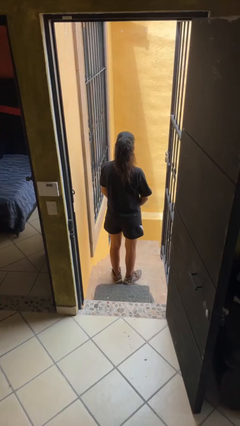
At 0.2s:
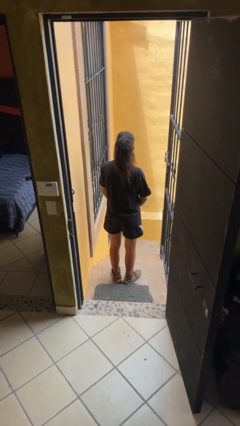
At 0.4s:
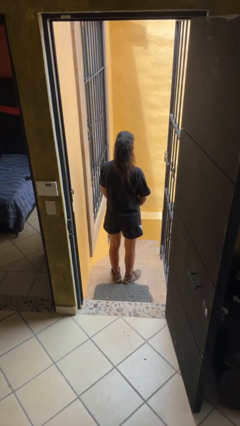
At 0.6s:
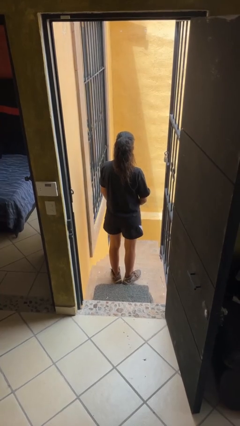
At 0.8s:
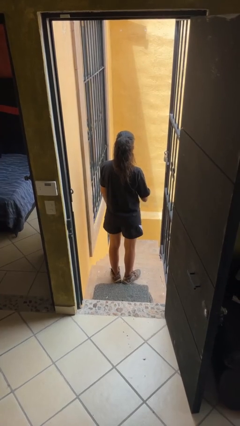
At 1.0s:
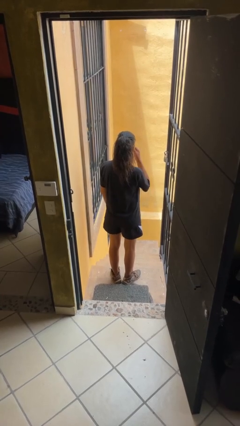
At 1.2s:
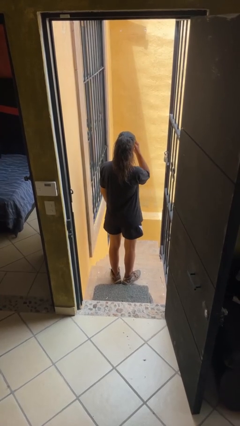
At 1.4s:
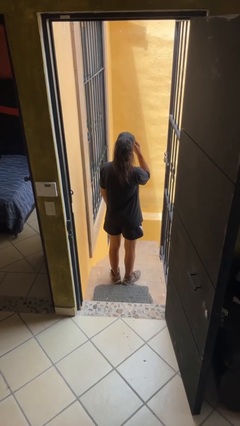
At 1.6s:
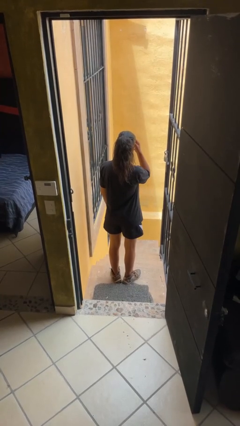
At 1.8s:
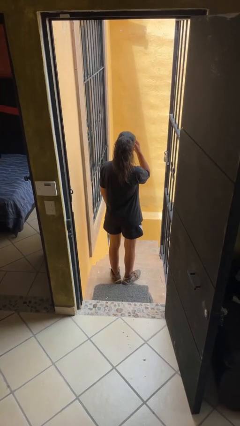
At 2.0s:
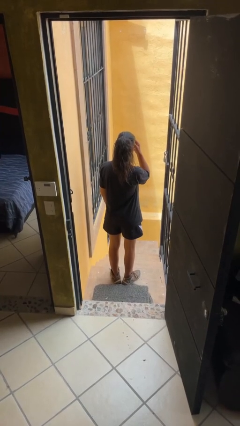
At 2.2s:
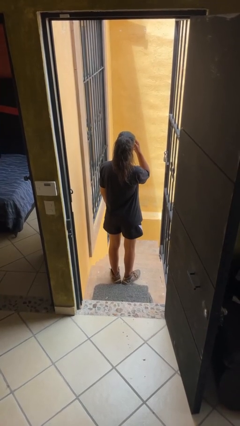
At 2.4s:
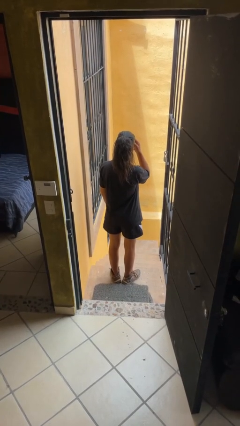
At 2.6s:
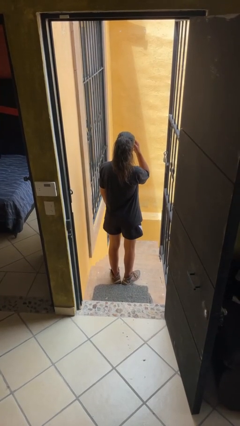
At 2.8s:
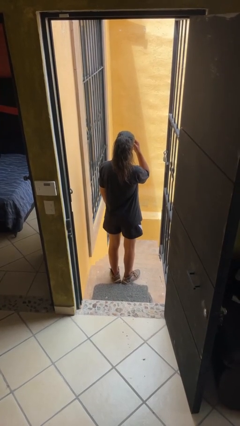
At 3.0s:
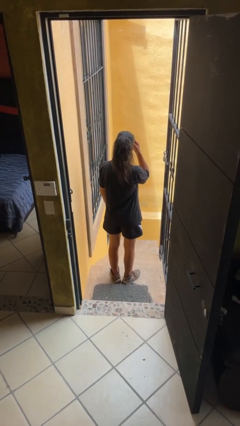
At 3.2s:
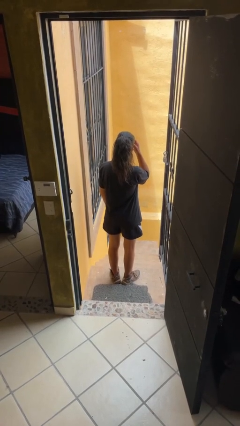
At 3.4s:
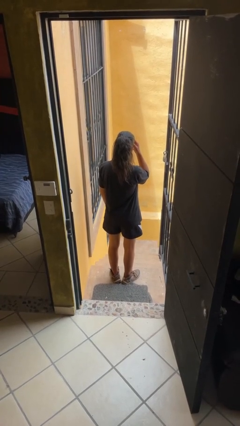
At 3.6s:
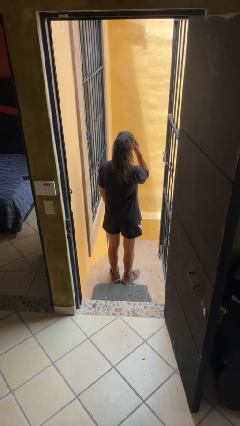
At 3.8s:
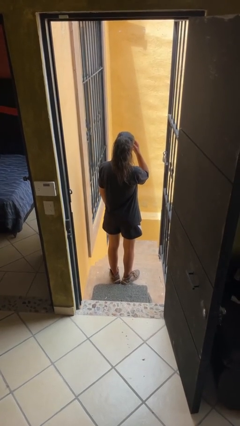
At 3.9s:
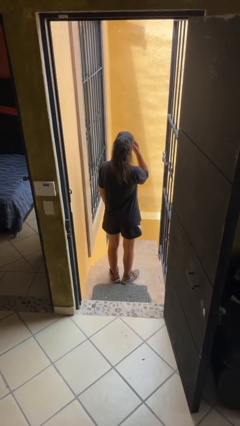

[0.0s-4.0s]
person scratches face

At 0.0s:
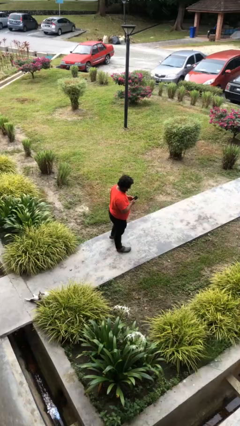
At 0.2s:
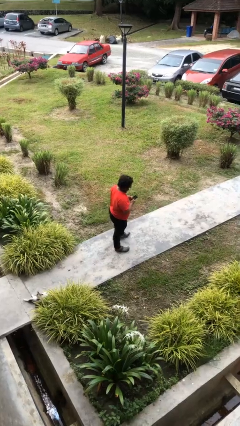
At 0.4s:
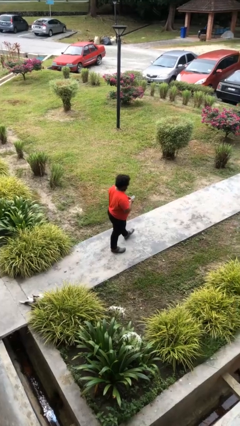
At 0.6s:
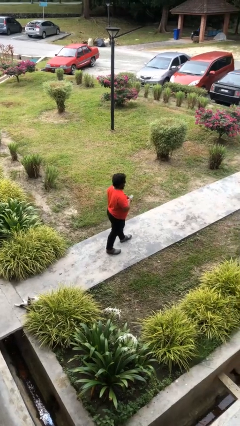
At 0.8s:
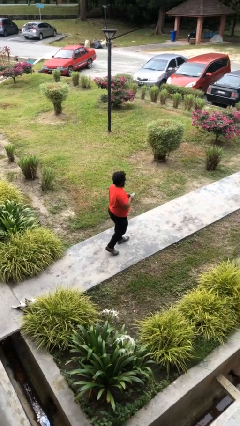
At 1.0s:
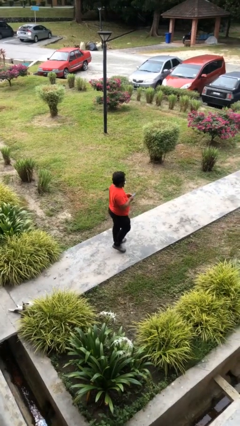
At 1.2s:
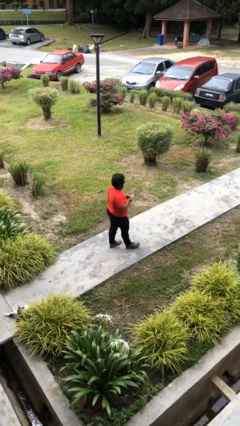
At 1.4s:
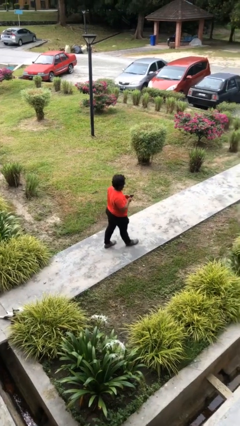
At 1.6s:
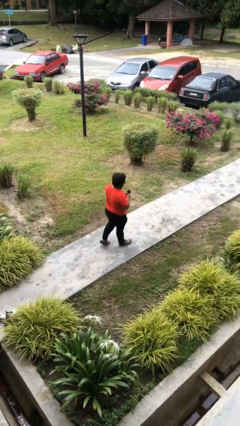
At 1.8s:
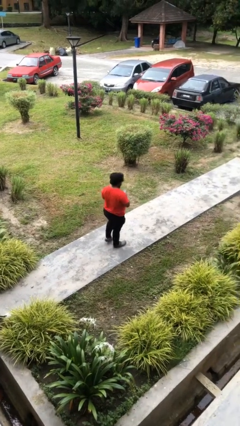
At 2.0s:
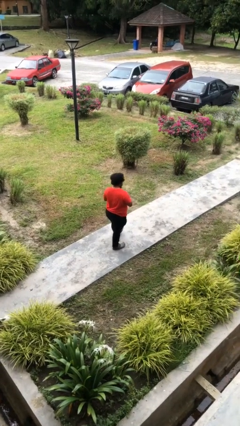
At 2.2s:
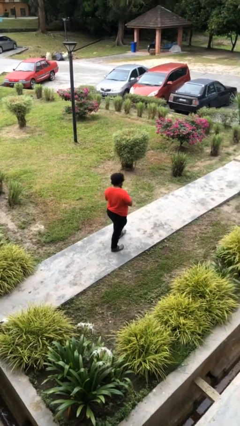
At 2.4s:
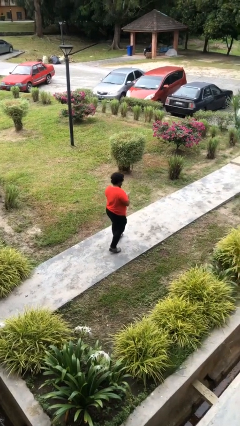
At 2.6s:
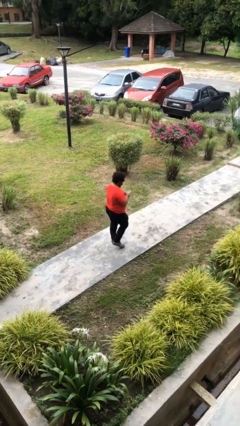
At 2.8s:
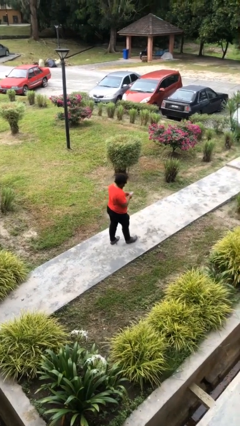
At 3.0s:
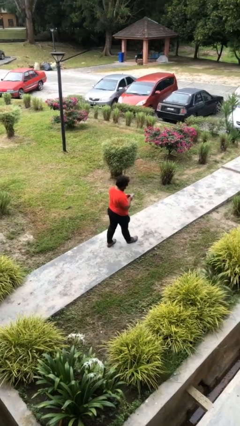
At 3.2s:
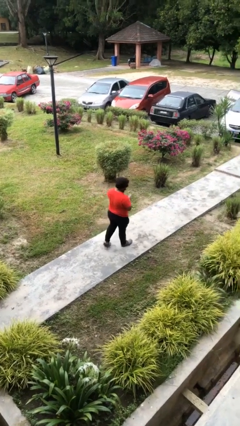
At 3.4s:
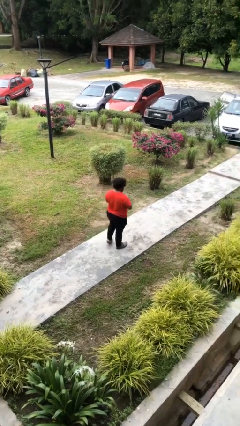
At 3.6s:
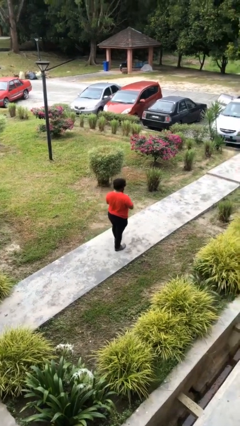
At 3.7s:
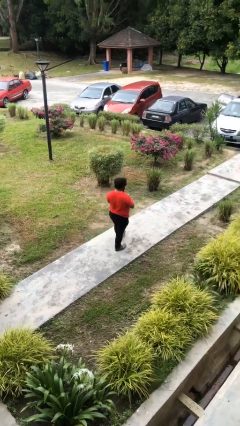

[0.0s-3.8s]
person texts on phone

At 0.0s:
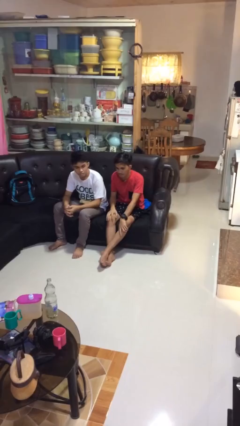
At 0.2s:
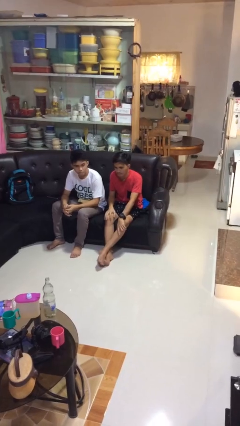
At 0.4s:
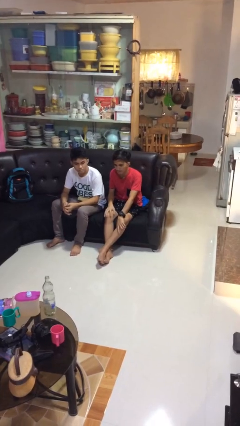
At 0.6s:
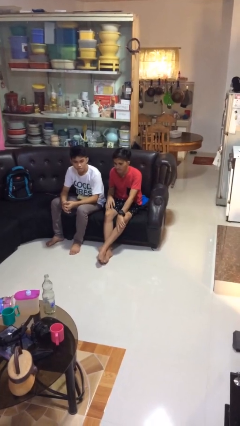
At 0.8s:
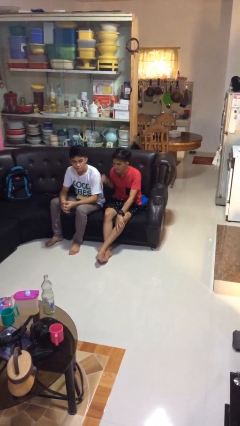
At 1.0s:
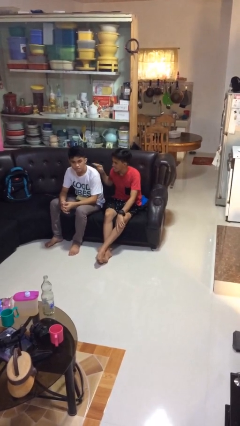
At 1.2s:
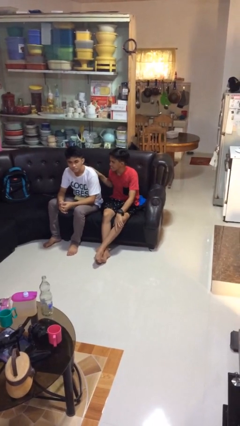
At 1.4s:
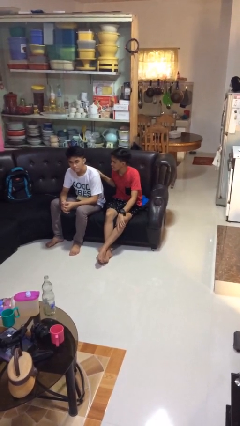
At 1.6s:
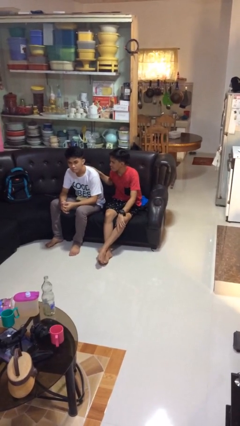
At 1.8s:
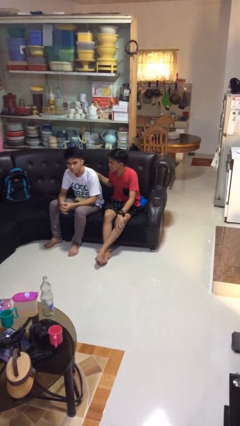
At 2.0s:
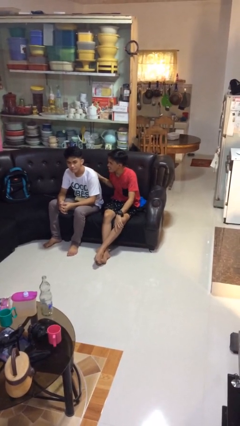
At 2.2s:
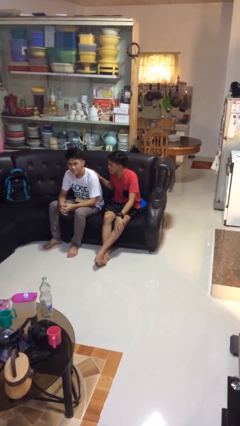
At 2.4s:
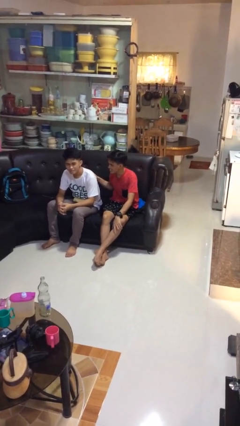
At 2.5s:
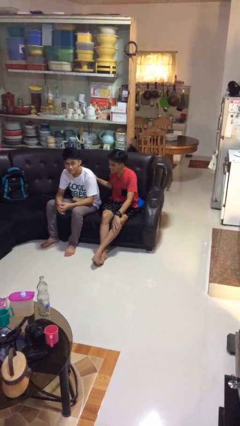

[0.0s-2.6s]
person touches back of person

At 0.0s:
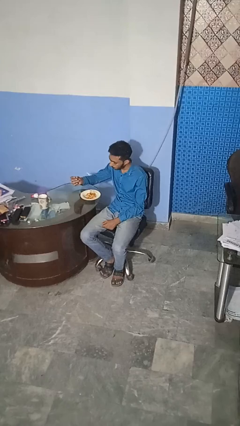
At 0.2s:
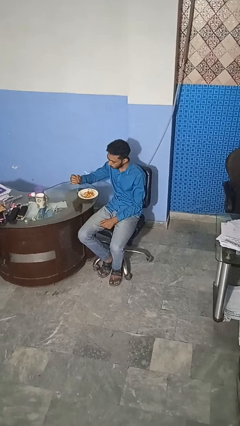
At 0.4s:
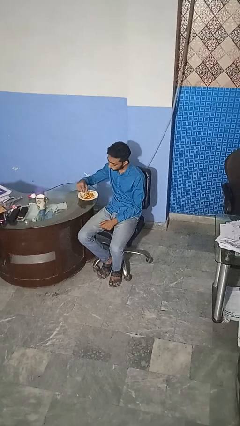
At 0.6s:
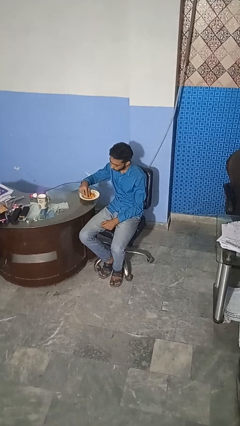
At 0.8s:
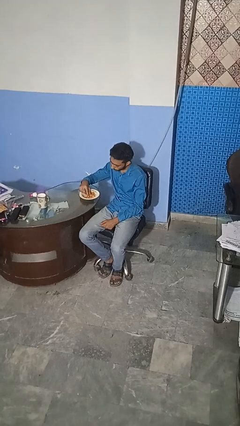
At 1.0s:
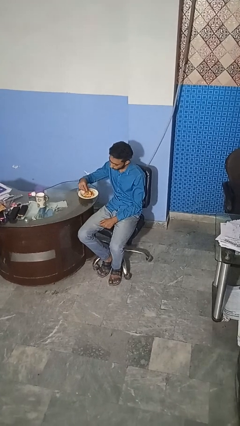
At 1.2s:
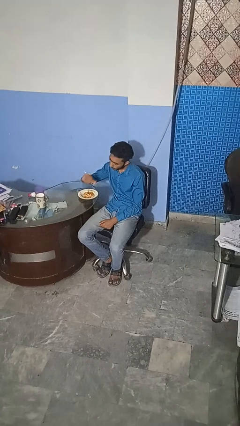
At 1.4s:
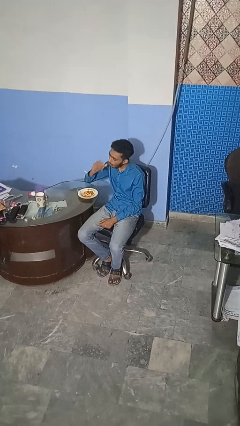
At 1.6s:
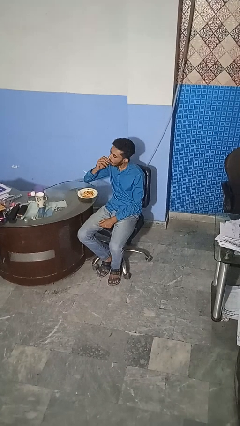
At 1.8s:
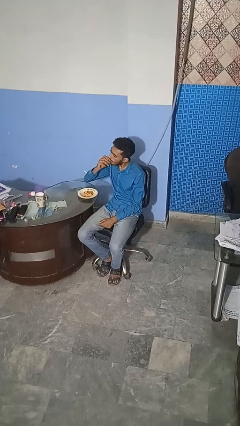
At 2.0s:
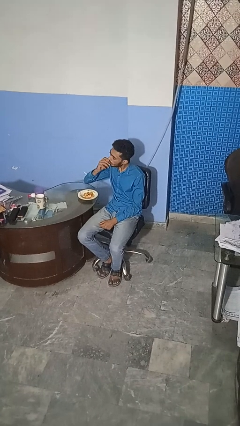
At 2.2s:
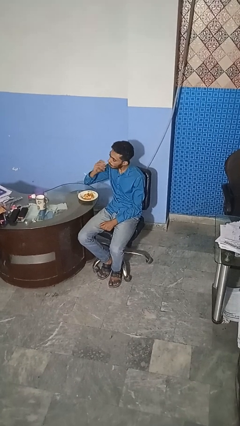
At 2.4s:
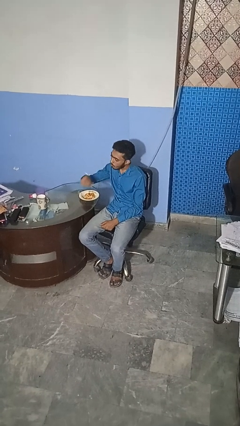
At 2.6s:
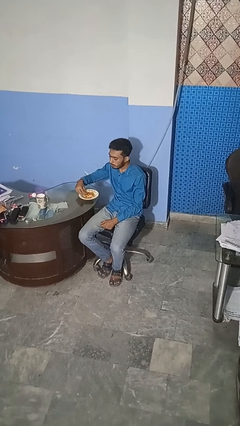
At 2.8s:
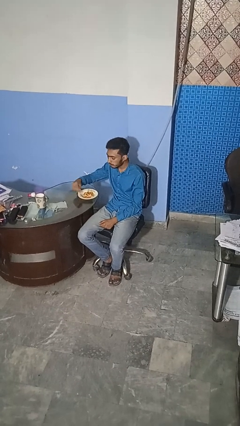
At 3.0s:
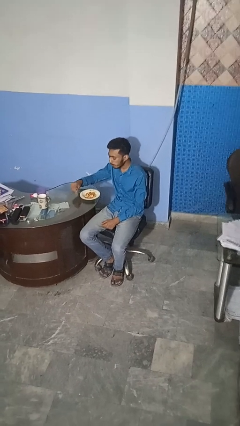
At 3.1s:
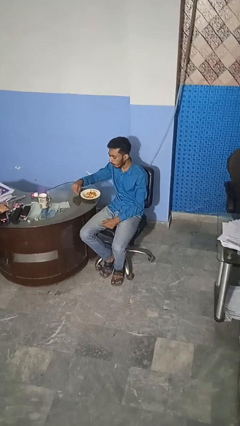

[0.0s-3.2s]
person eats with hands

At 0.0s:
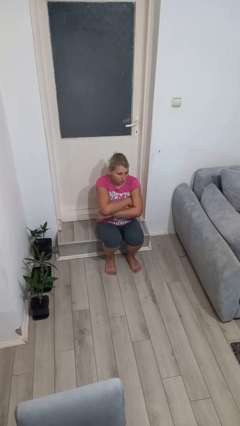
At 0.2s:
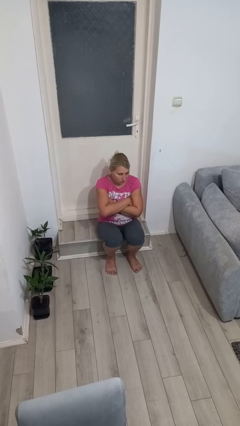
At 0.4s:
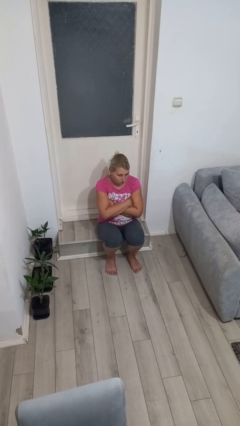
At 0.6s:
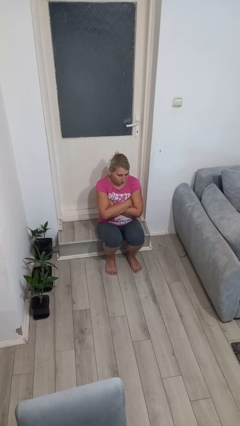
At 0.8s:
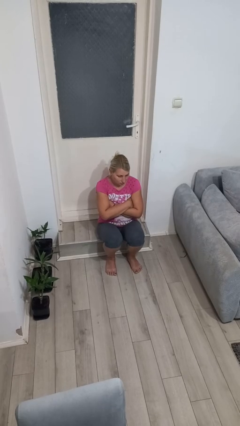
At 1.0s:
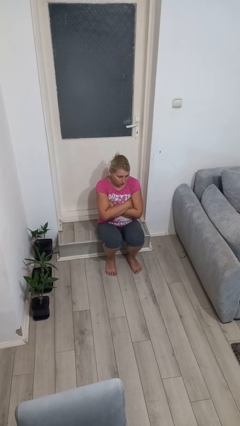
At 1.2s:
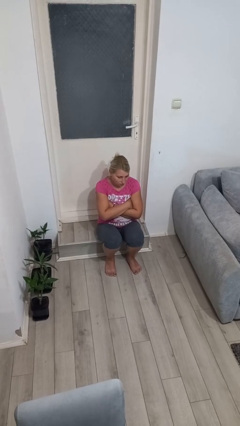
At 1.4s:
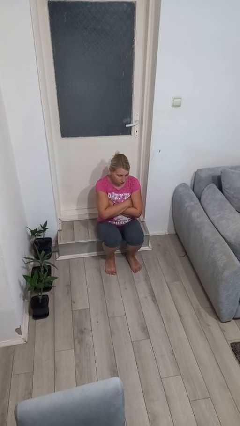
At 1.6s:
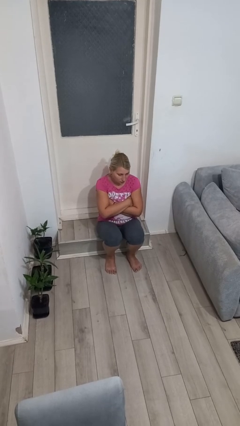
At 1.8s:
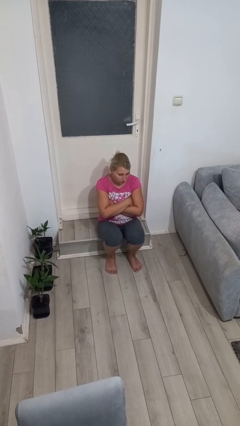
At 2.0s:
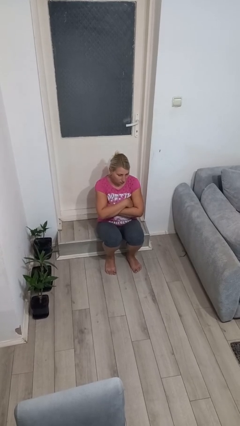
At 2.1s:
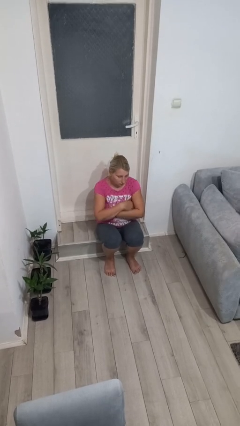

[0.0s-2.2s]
person crosses arms

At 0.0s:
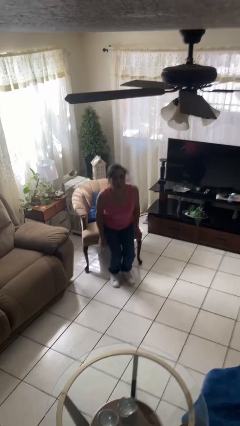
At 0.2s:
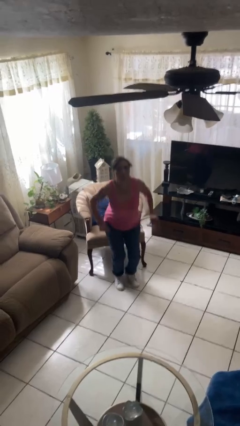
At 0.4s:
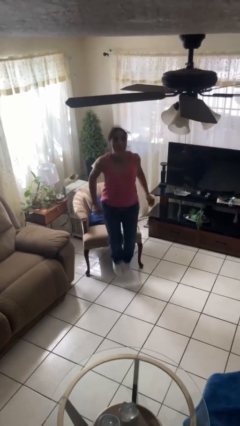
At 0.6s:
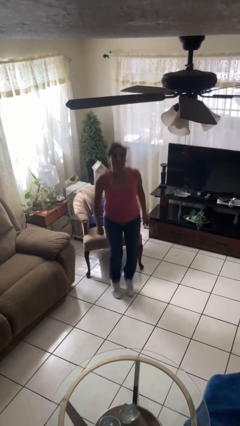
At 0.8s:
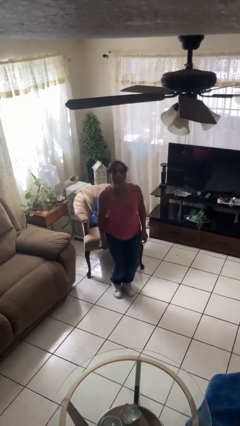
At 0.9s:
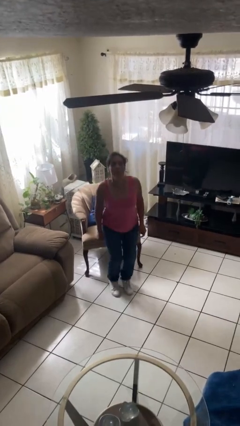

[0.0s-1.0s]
person jumps

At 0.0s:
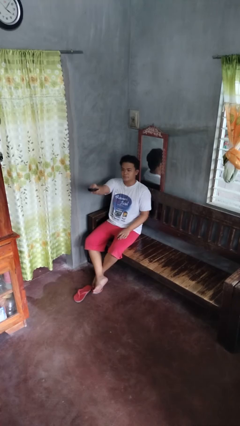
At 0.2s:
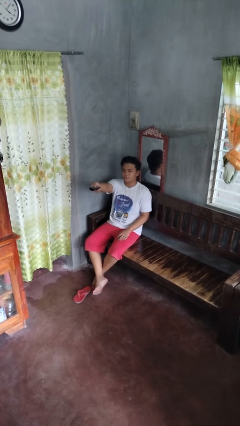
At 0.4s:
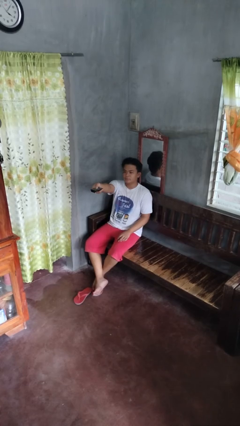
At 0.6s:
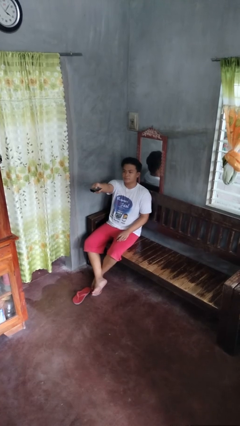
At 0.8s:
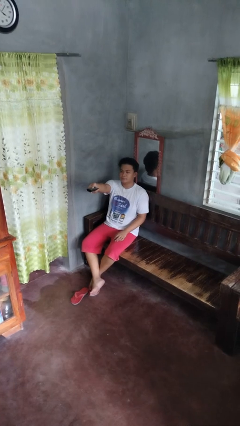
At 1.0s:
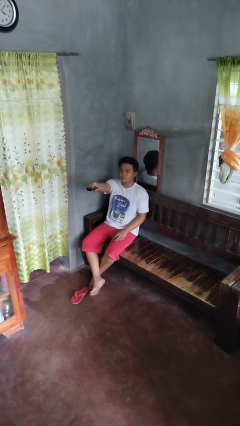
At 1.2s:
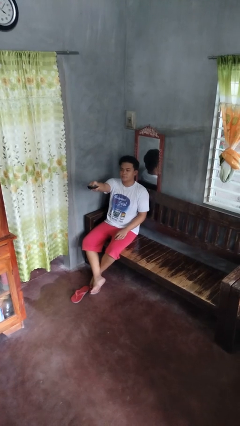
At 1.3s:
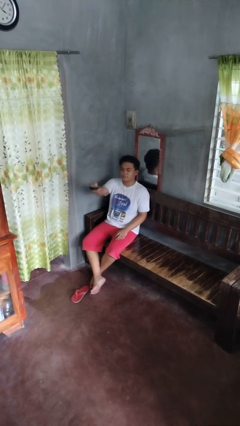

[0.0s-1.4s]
person uses television remote
